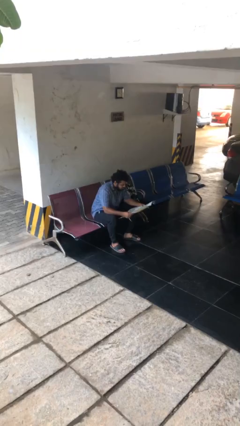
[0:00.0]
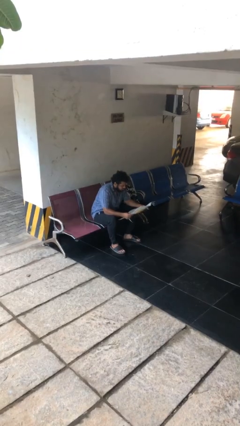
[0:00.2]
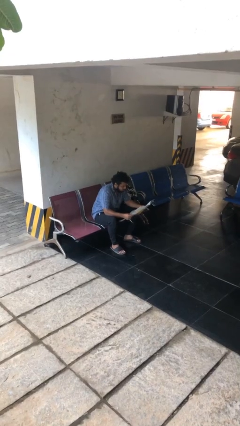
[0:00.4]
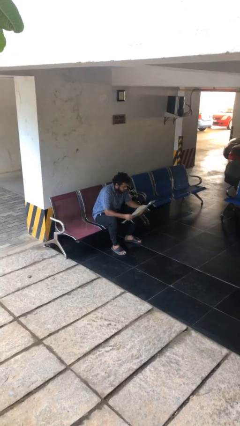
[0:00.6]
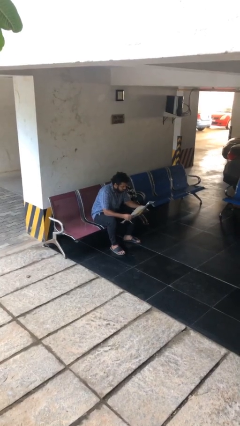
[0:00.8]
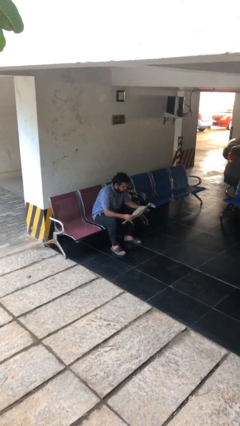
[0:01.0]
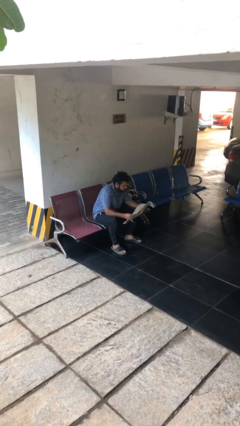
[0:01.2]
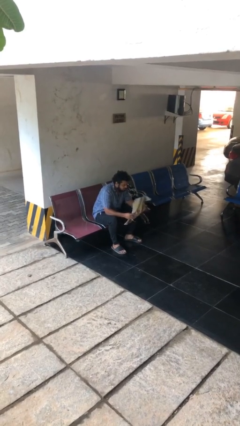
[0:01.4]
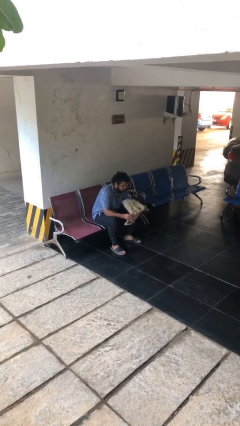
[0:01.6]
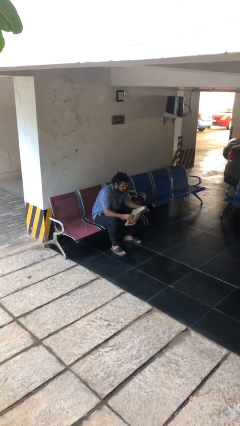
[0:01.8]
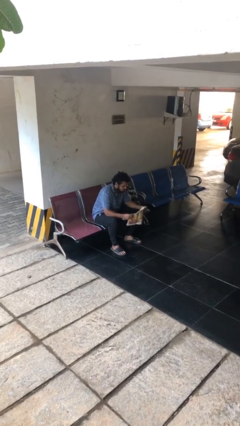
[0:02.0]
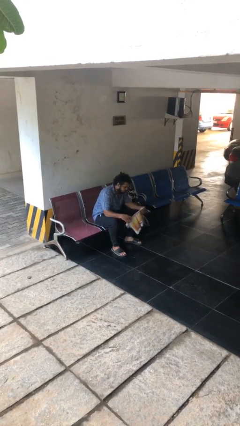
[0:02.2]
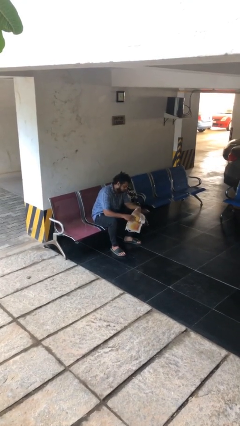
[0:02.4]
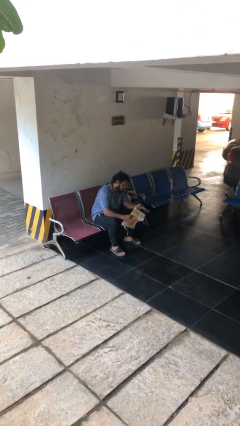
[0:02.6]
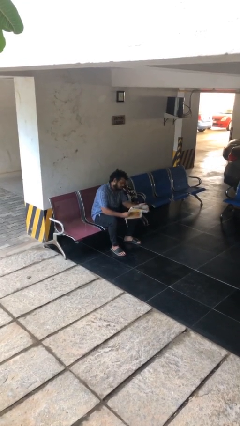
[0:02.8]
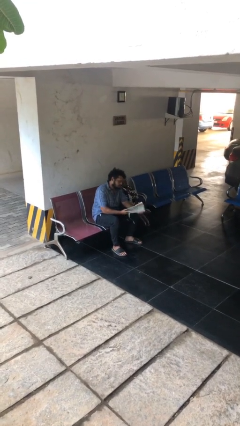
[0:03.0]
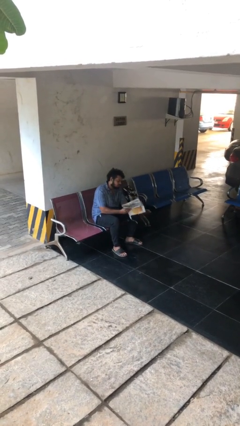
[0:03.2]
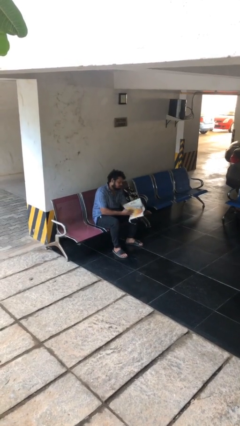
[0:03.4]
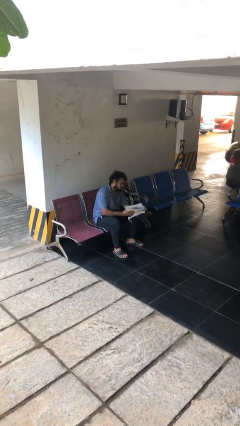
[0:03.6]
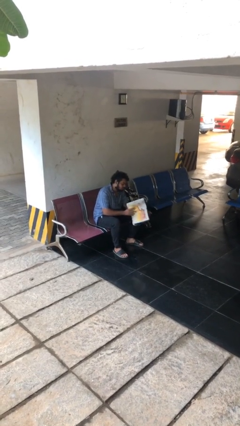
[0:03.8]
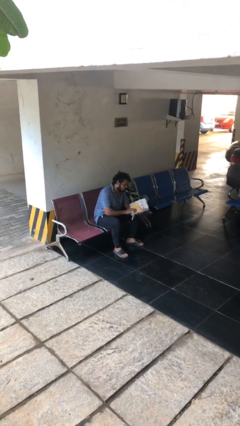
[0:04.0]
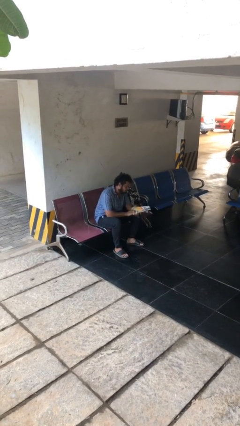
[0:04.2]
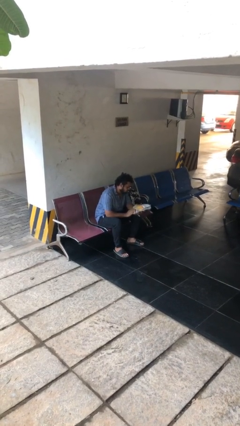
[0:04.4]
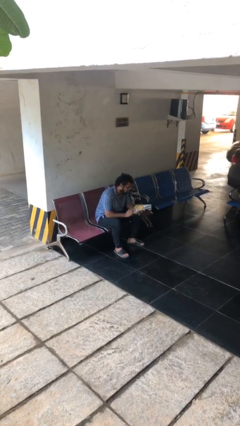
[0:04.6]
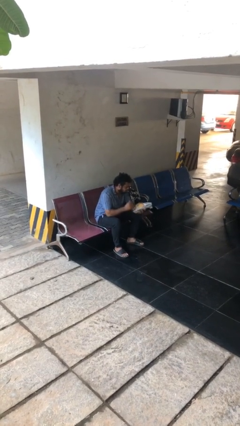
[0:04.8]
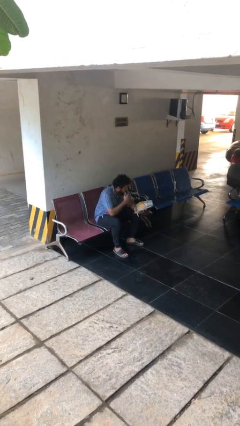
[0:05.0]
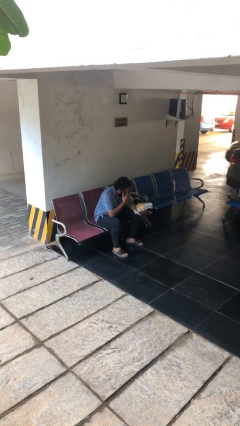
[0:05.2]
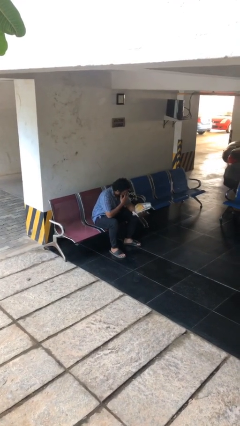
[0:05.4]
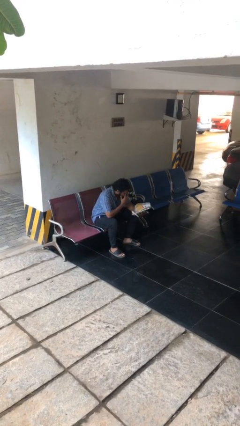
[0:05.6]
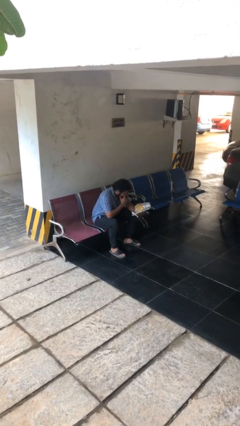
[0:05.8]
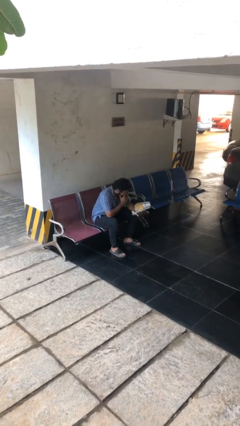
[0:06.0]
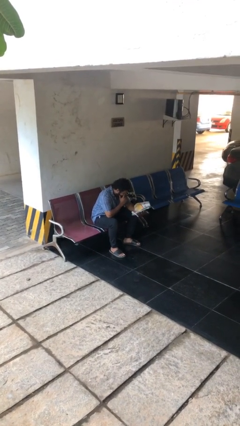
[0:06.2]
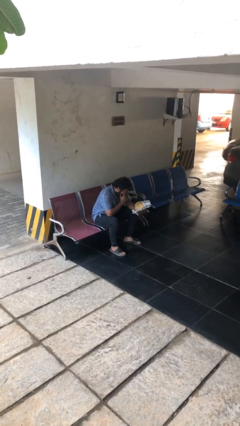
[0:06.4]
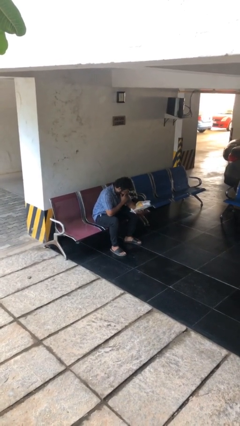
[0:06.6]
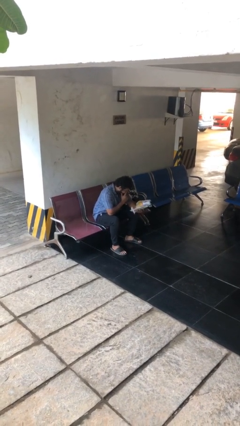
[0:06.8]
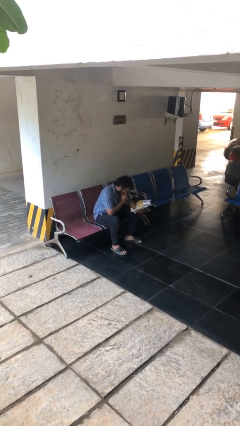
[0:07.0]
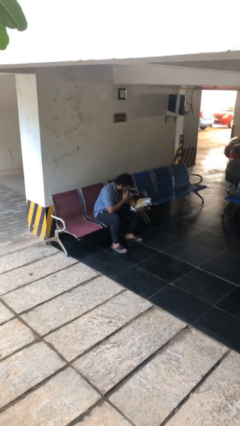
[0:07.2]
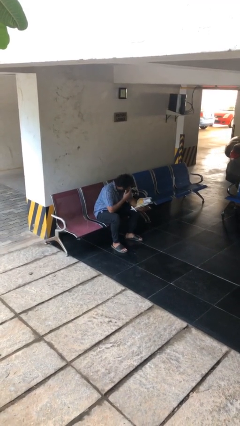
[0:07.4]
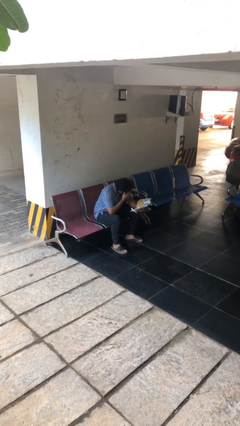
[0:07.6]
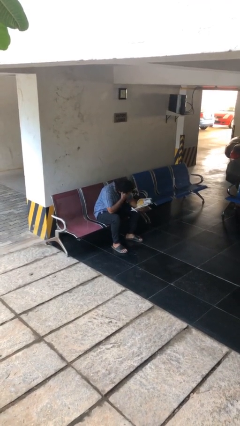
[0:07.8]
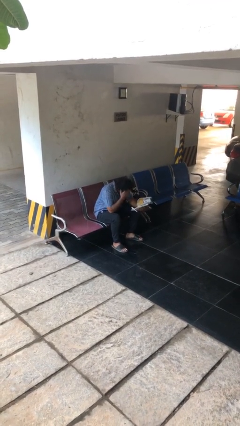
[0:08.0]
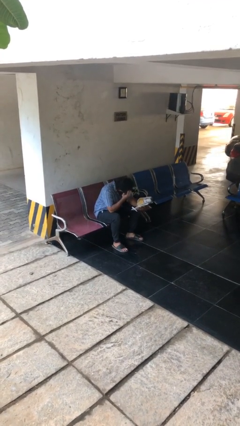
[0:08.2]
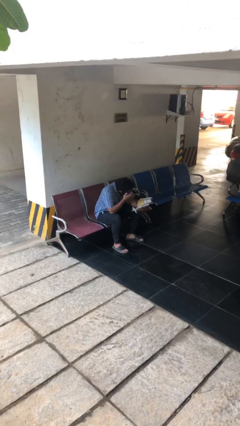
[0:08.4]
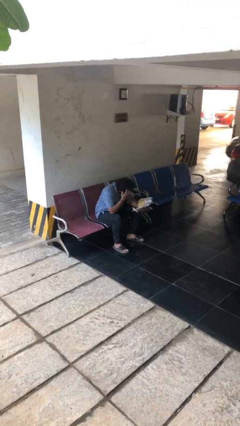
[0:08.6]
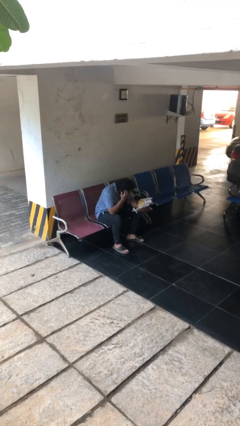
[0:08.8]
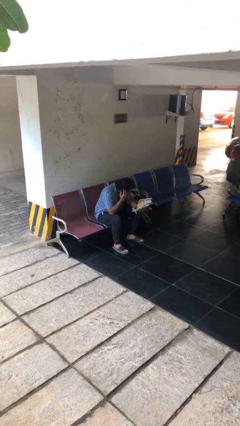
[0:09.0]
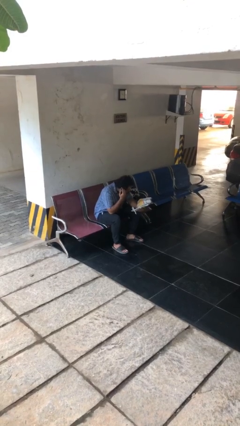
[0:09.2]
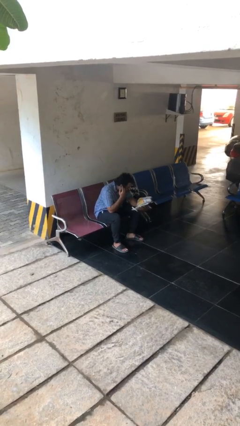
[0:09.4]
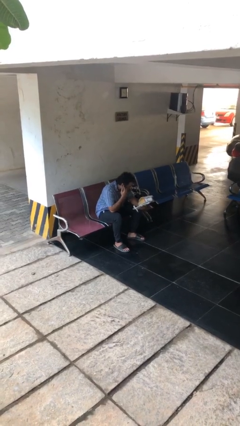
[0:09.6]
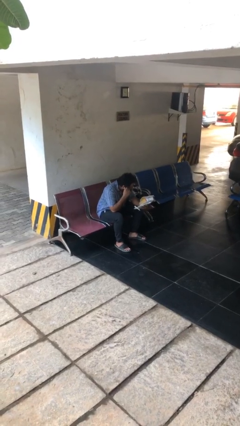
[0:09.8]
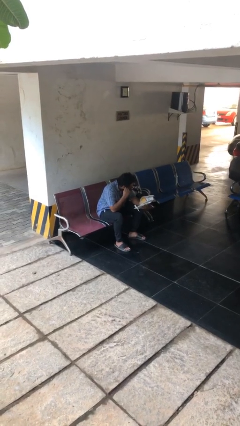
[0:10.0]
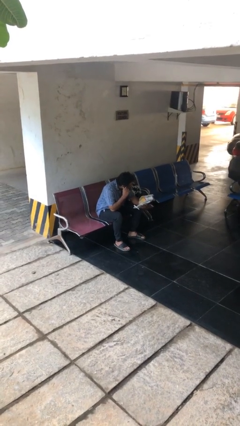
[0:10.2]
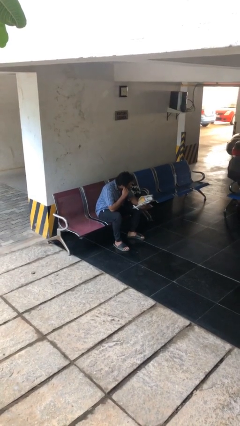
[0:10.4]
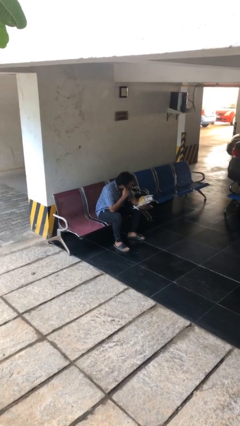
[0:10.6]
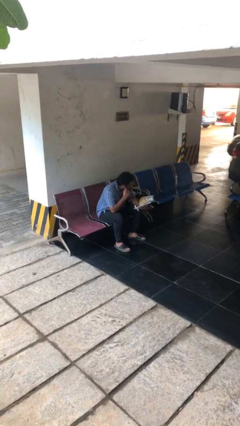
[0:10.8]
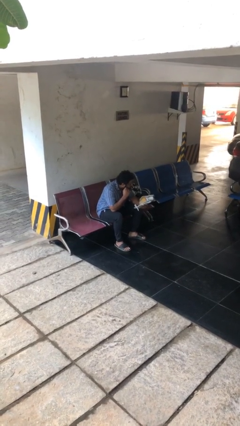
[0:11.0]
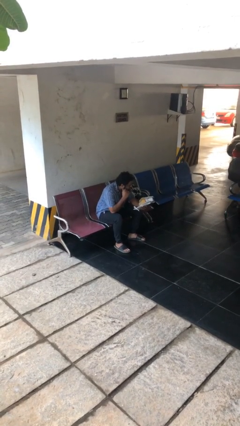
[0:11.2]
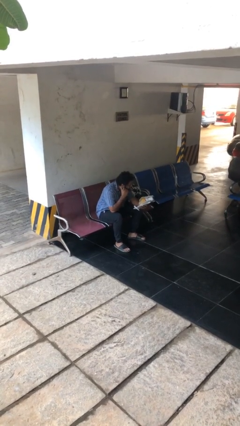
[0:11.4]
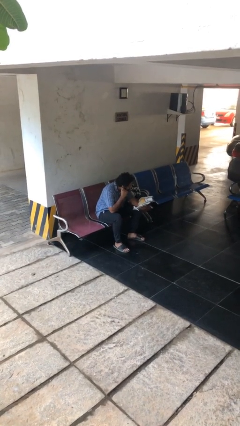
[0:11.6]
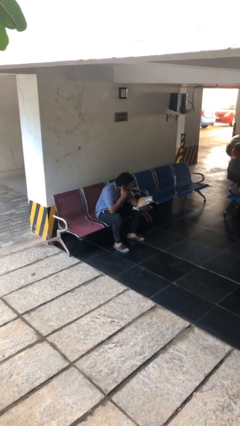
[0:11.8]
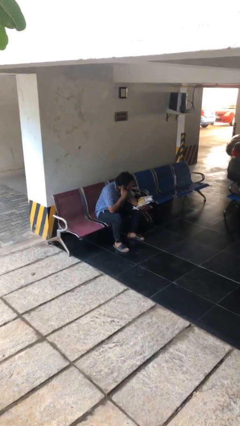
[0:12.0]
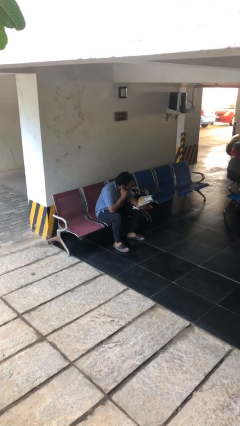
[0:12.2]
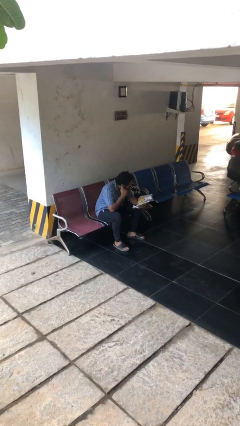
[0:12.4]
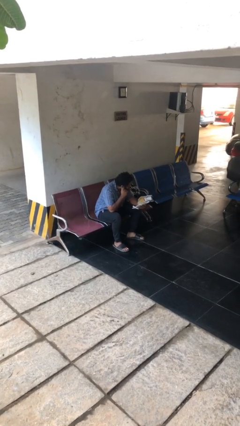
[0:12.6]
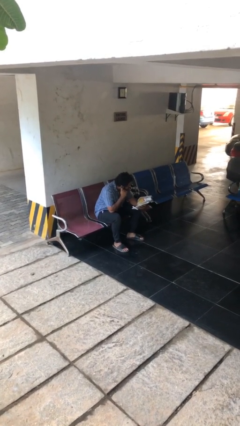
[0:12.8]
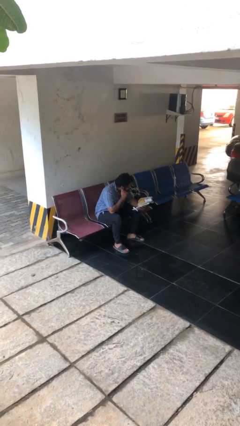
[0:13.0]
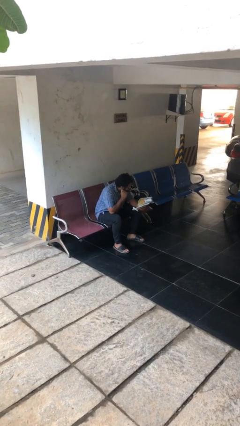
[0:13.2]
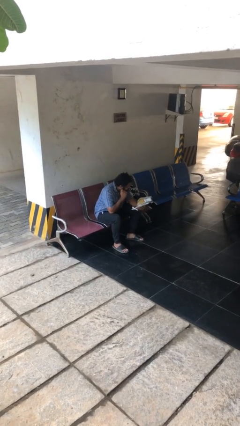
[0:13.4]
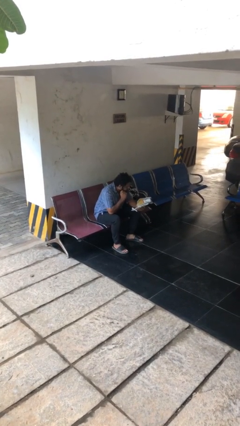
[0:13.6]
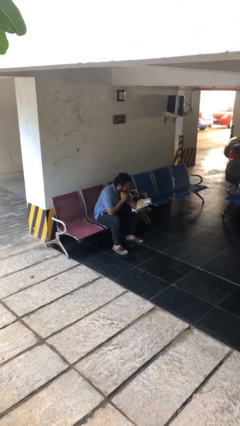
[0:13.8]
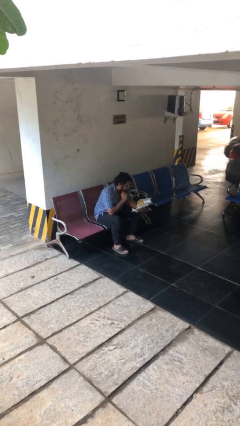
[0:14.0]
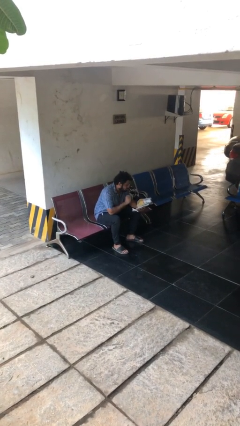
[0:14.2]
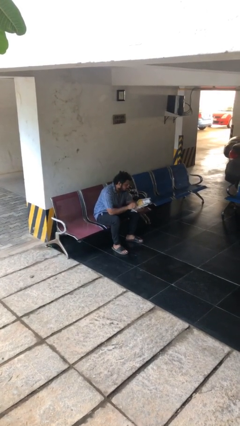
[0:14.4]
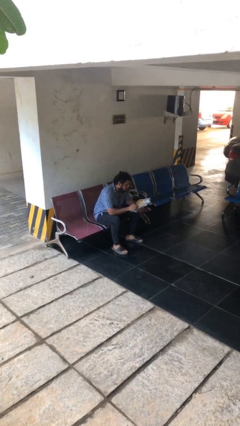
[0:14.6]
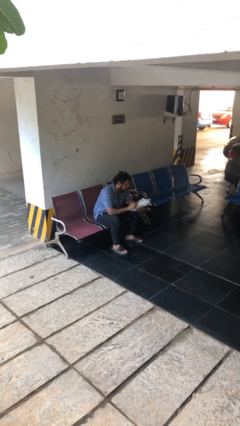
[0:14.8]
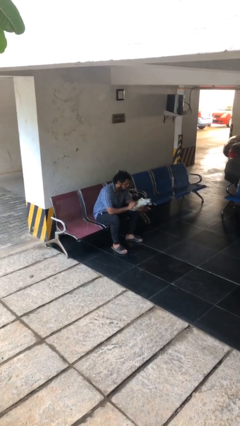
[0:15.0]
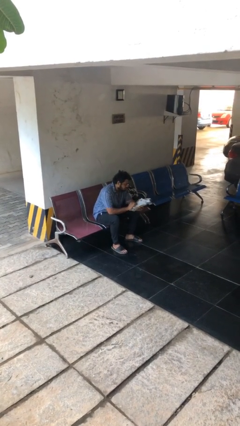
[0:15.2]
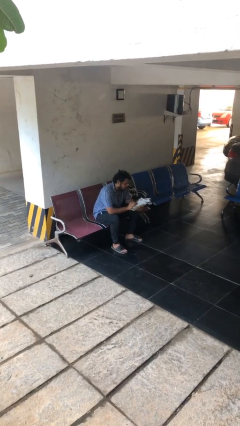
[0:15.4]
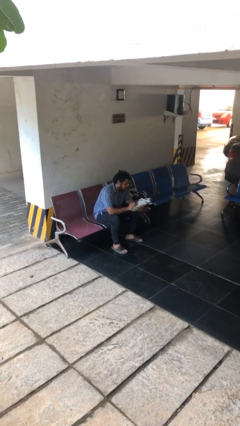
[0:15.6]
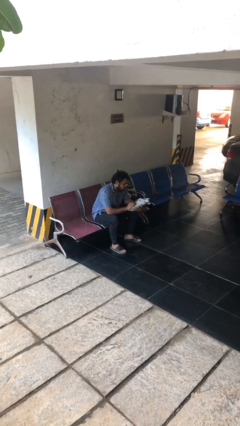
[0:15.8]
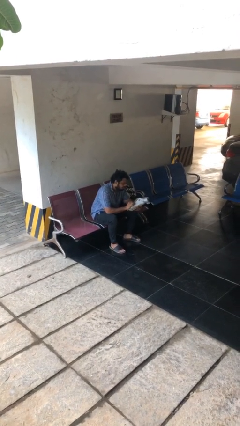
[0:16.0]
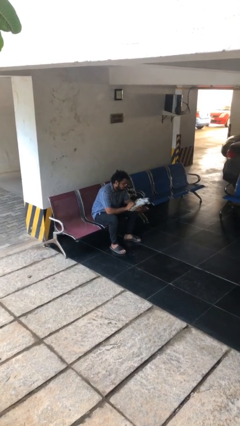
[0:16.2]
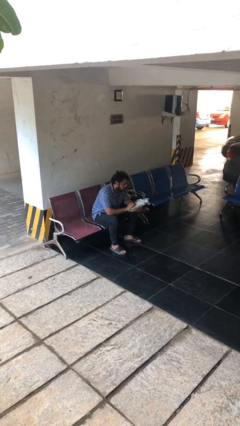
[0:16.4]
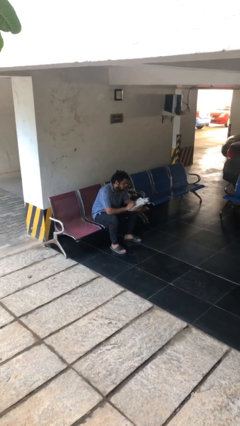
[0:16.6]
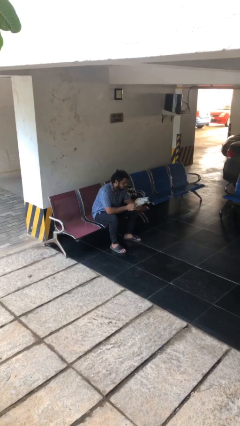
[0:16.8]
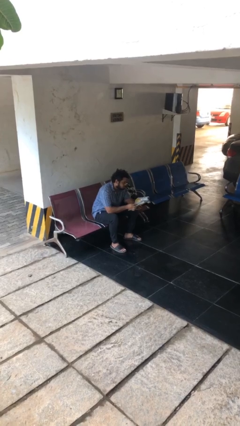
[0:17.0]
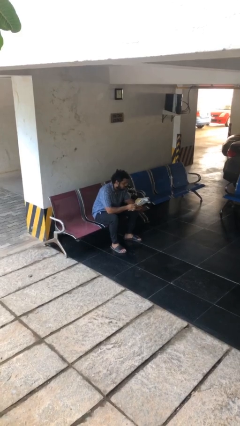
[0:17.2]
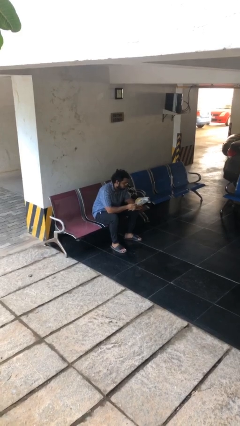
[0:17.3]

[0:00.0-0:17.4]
person reads document

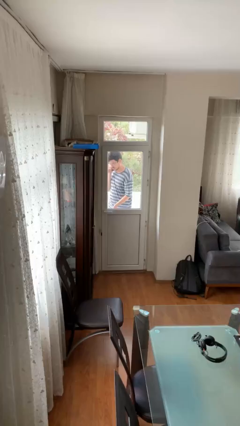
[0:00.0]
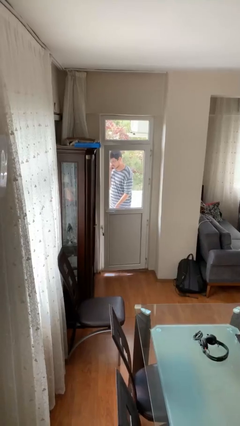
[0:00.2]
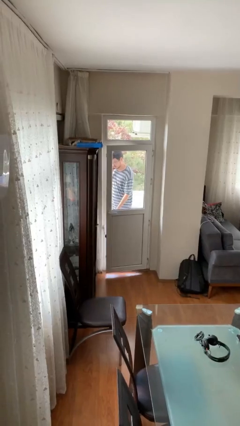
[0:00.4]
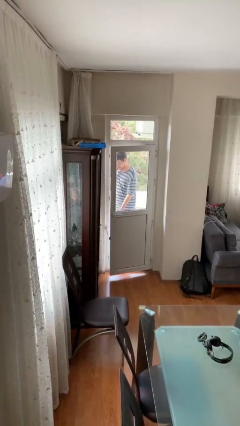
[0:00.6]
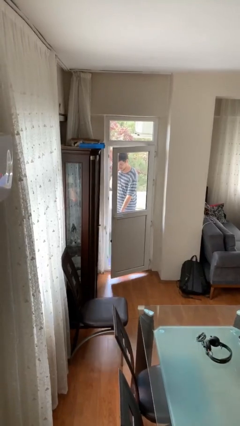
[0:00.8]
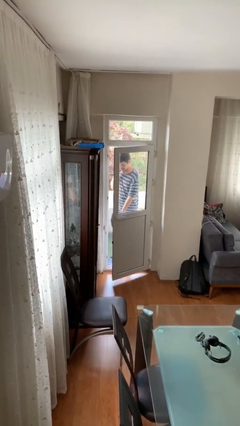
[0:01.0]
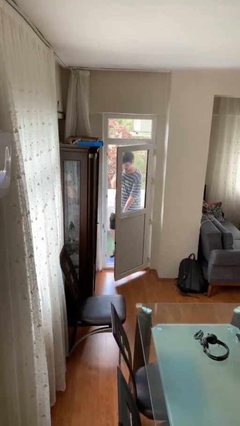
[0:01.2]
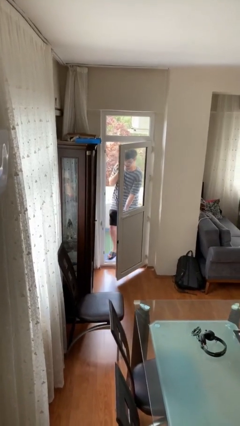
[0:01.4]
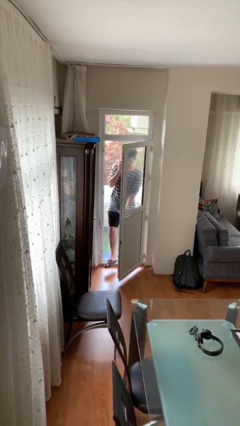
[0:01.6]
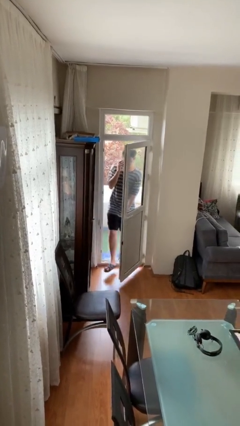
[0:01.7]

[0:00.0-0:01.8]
person opens facility door
